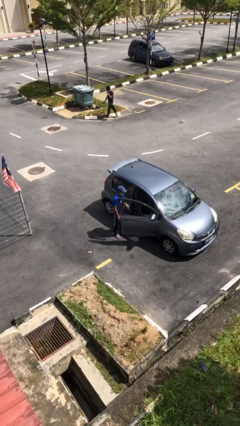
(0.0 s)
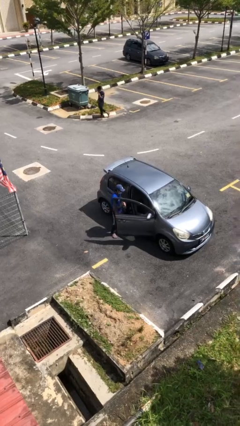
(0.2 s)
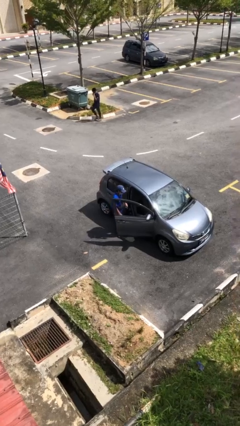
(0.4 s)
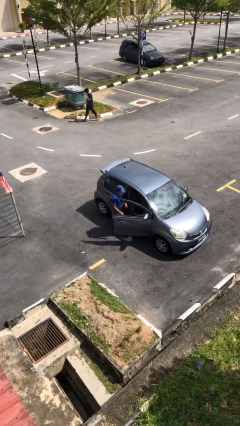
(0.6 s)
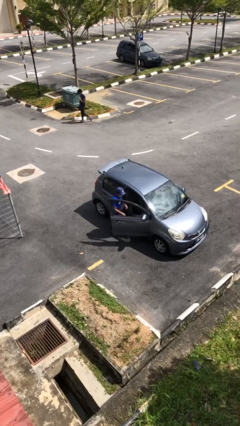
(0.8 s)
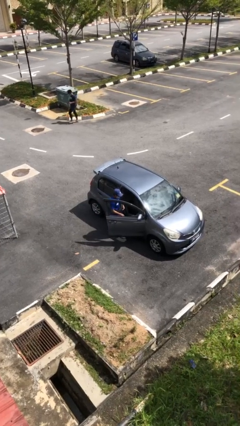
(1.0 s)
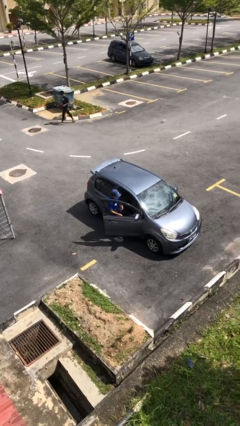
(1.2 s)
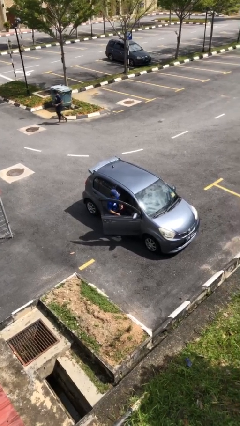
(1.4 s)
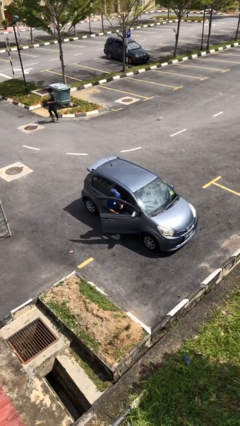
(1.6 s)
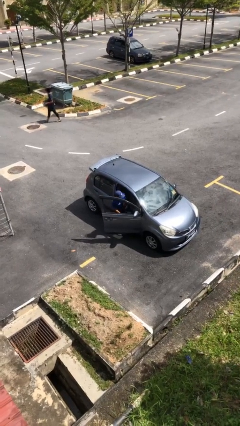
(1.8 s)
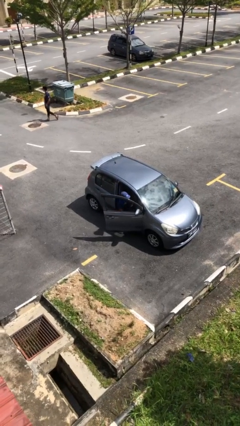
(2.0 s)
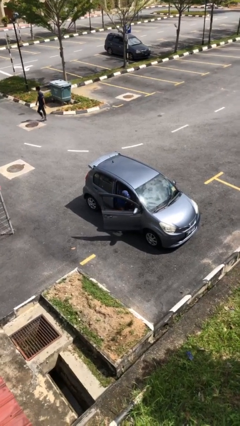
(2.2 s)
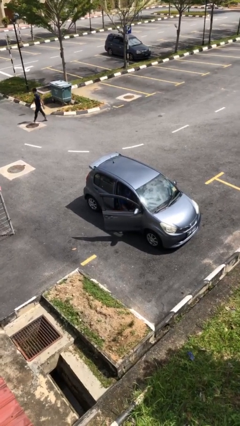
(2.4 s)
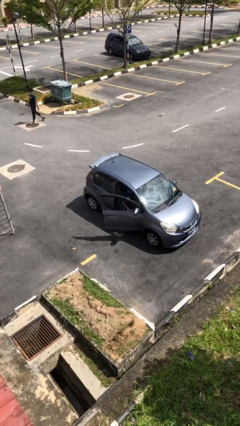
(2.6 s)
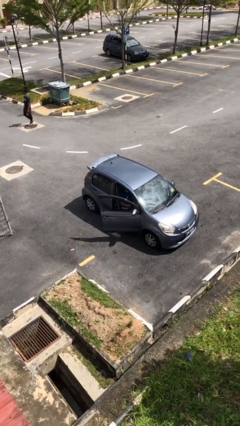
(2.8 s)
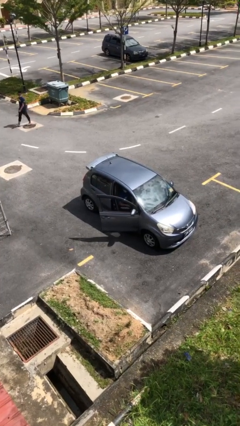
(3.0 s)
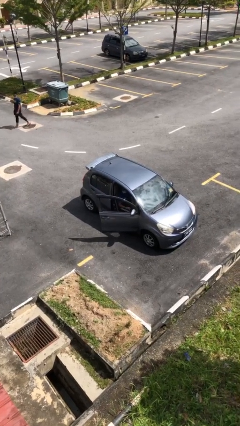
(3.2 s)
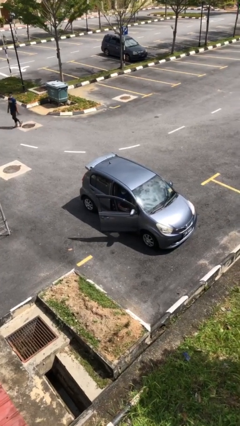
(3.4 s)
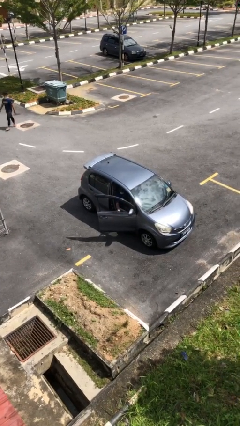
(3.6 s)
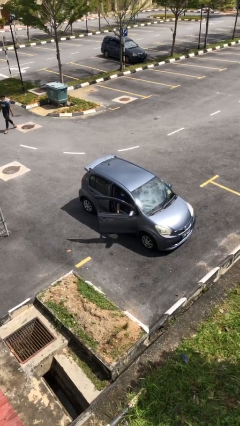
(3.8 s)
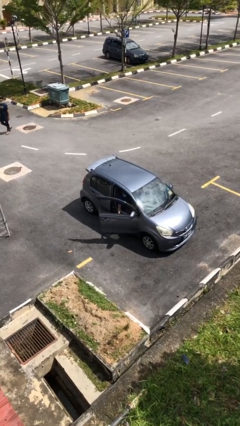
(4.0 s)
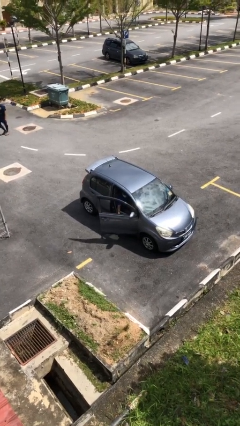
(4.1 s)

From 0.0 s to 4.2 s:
person enters car

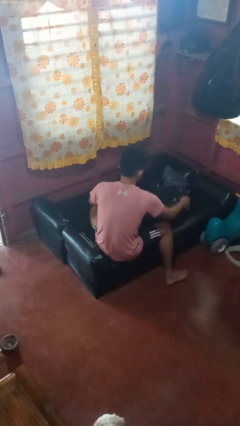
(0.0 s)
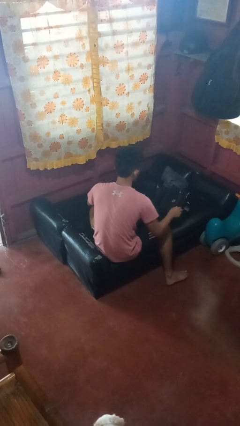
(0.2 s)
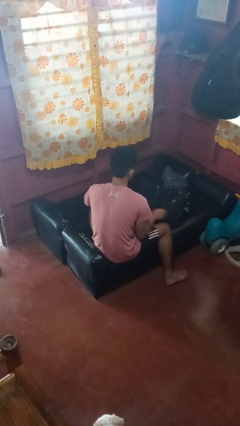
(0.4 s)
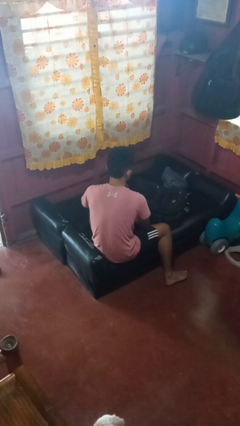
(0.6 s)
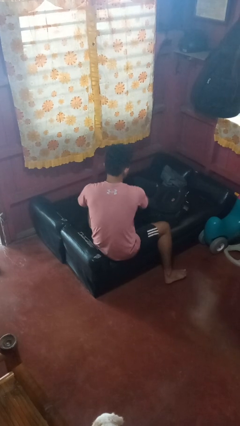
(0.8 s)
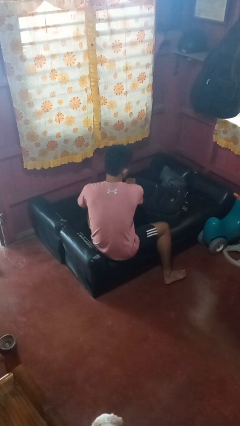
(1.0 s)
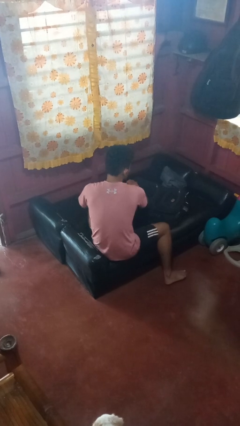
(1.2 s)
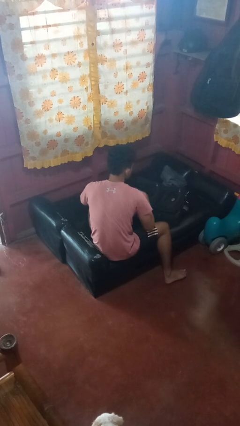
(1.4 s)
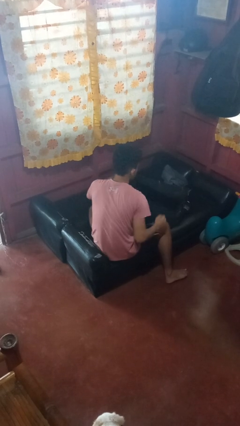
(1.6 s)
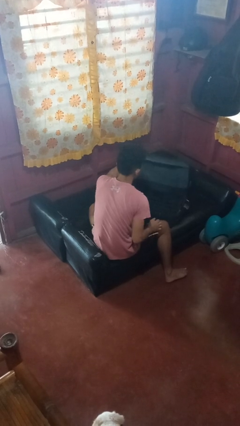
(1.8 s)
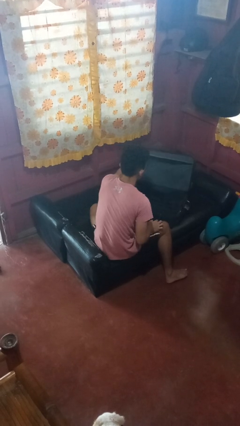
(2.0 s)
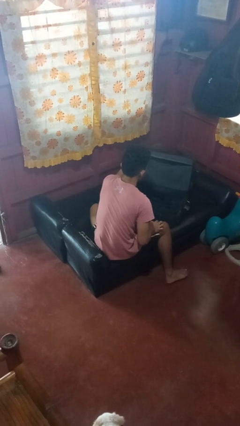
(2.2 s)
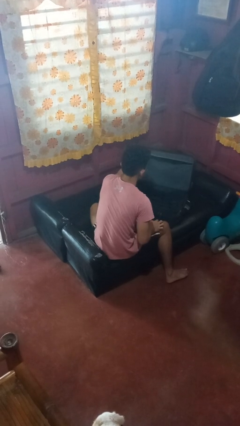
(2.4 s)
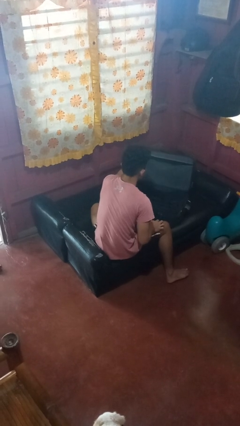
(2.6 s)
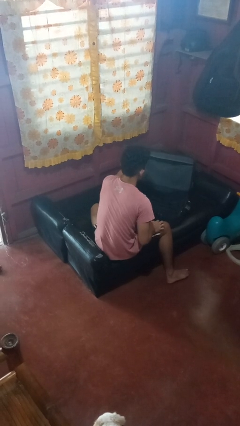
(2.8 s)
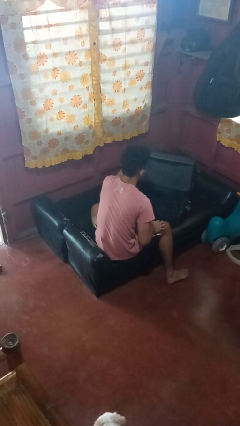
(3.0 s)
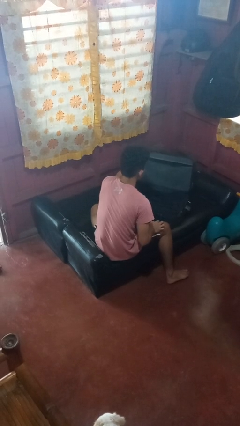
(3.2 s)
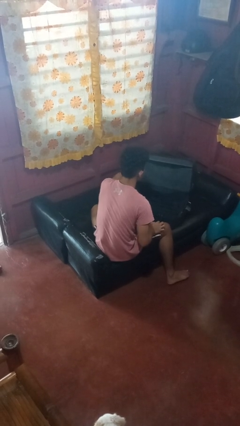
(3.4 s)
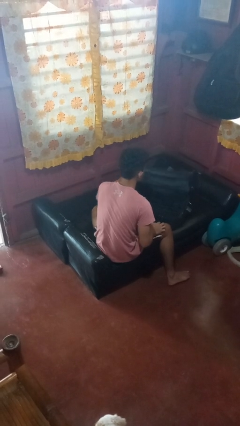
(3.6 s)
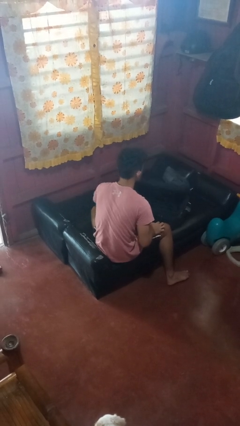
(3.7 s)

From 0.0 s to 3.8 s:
person opens suitcase

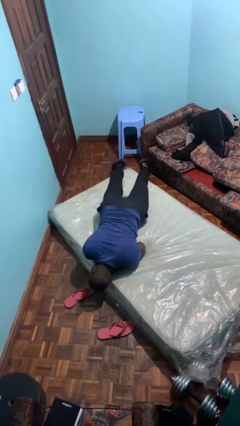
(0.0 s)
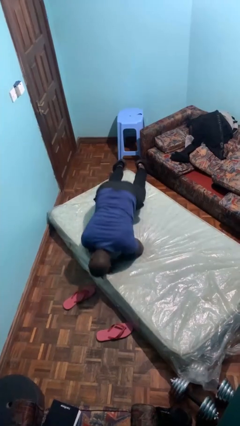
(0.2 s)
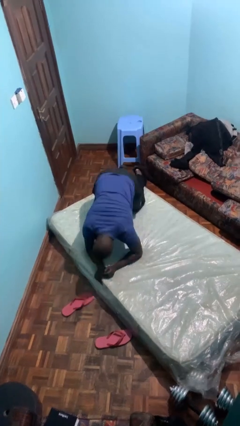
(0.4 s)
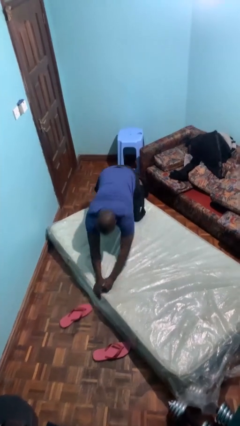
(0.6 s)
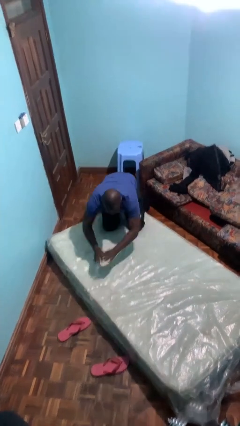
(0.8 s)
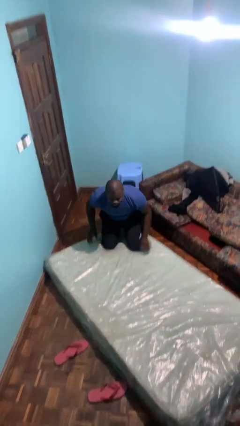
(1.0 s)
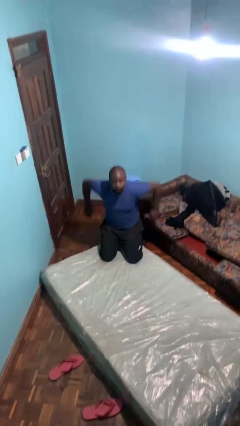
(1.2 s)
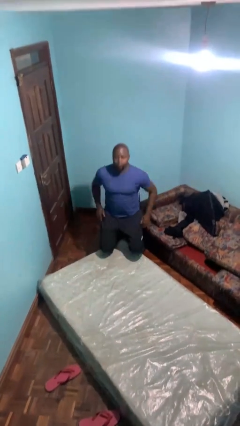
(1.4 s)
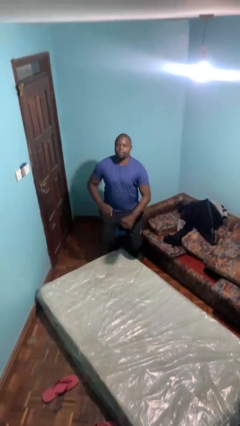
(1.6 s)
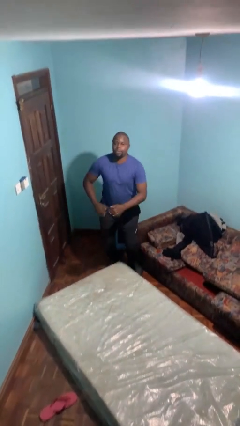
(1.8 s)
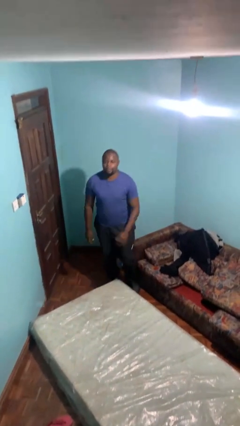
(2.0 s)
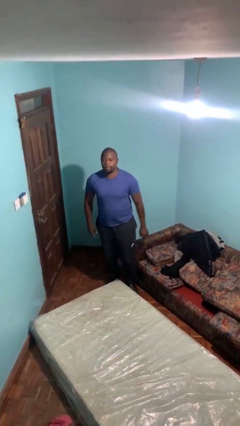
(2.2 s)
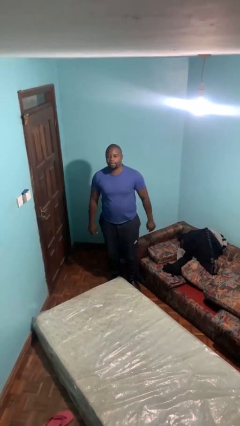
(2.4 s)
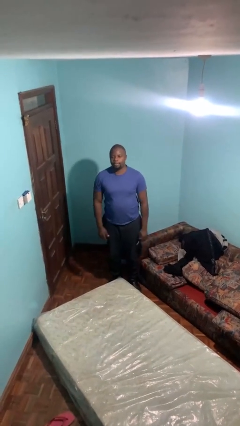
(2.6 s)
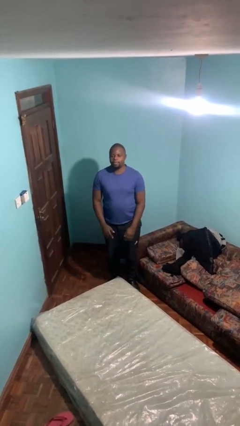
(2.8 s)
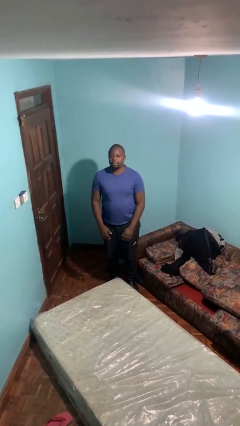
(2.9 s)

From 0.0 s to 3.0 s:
person stands up

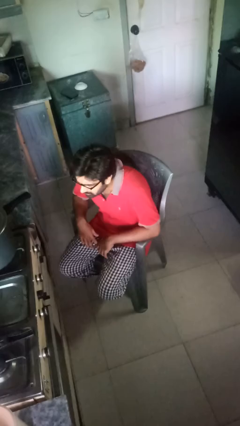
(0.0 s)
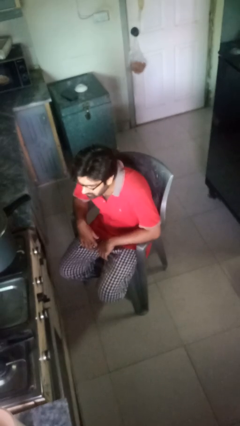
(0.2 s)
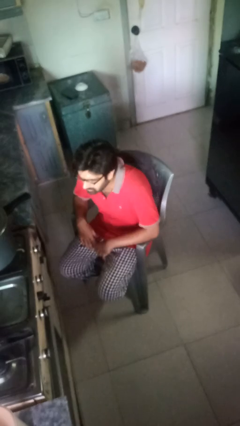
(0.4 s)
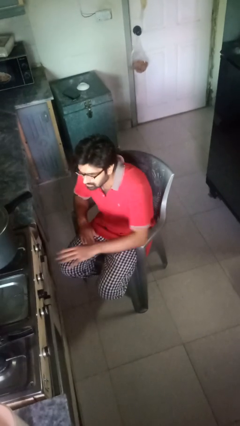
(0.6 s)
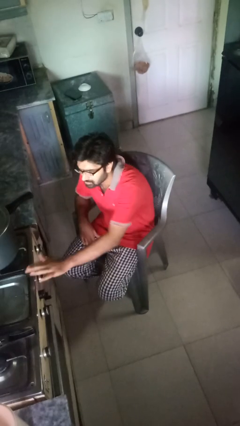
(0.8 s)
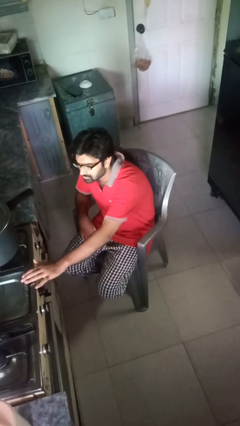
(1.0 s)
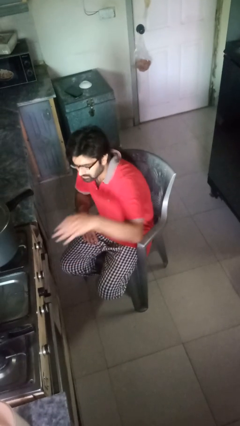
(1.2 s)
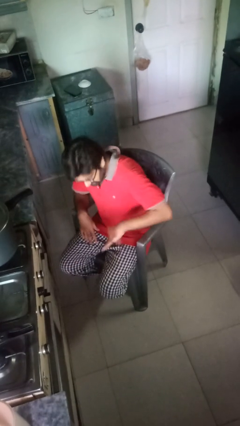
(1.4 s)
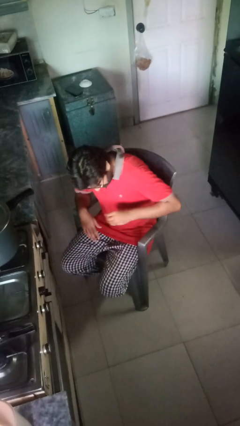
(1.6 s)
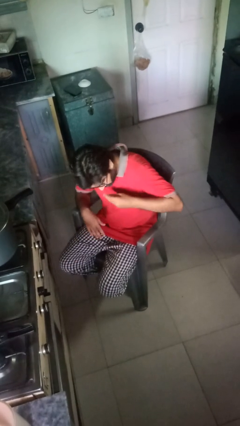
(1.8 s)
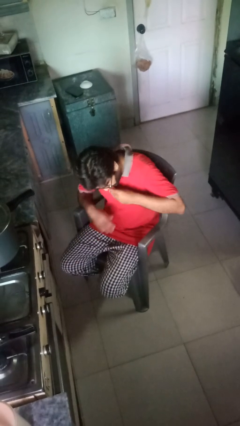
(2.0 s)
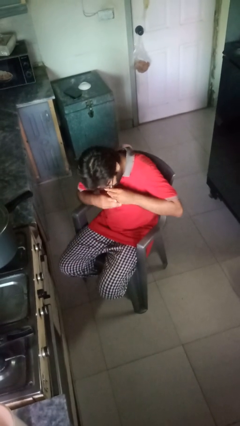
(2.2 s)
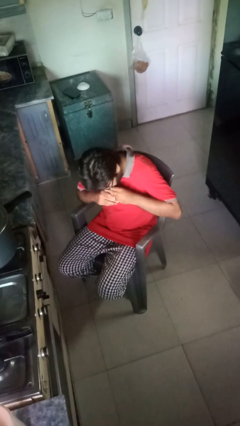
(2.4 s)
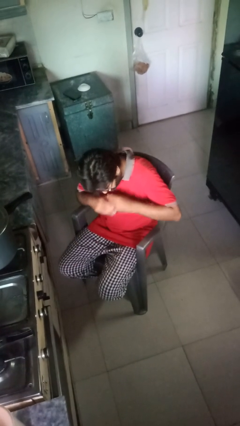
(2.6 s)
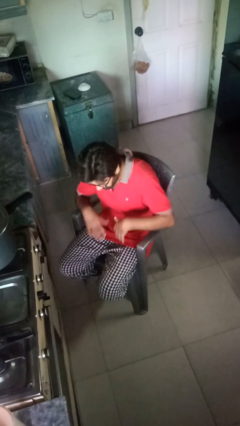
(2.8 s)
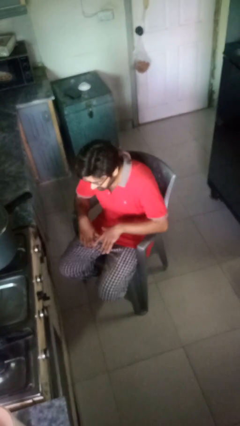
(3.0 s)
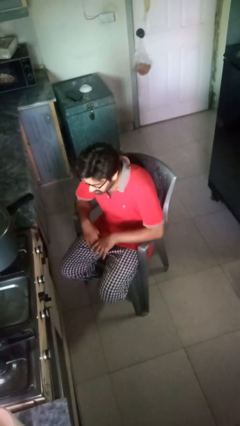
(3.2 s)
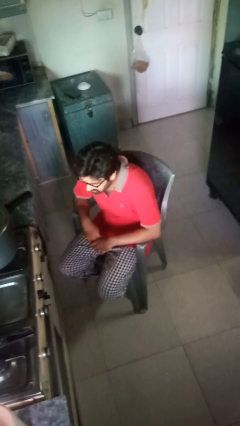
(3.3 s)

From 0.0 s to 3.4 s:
person burns hand

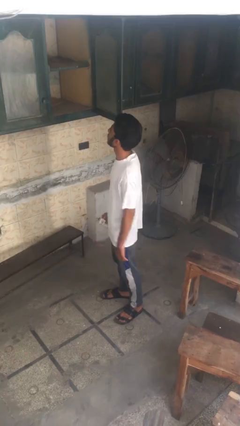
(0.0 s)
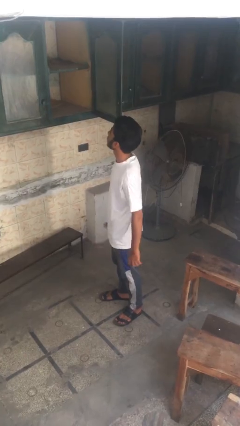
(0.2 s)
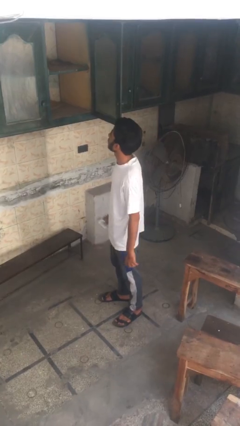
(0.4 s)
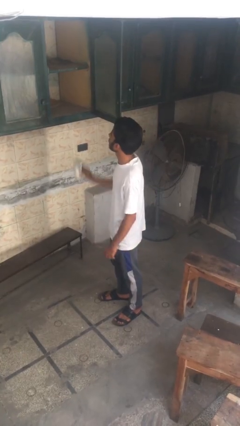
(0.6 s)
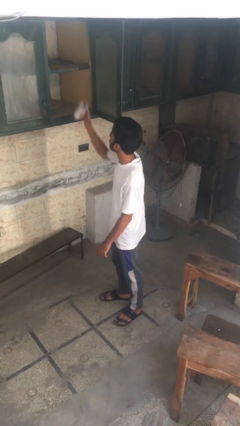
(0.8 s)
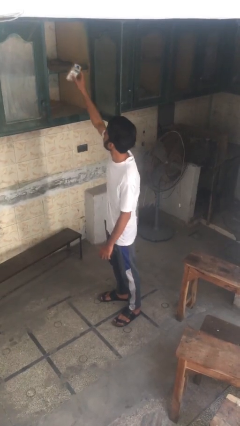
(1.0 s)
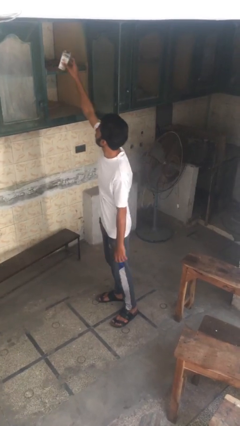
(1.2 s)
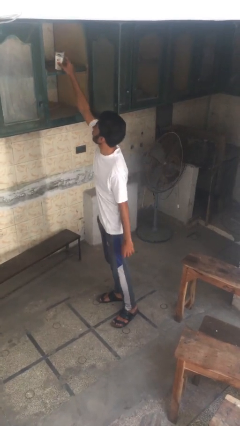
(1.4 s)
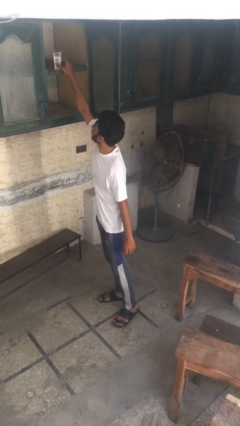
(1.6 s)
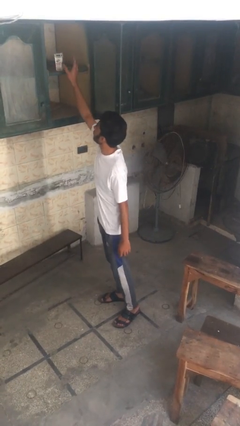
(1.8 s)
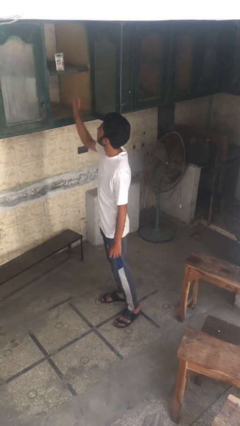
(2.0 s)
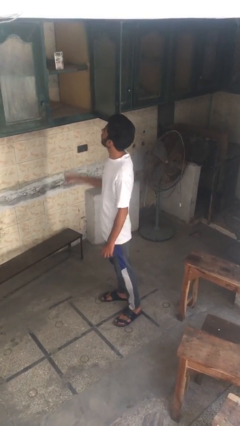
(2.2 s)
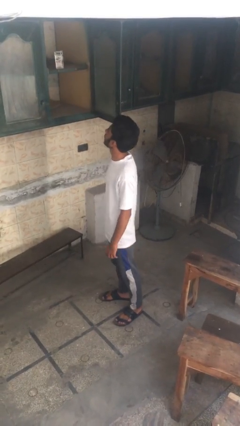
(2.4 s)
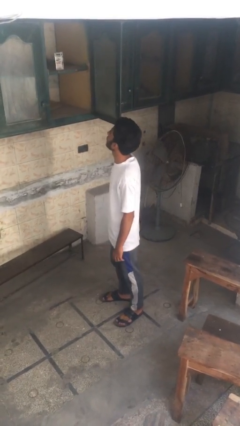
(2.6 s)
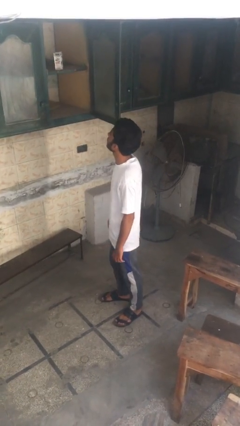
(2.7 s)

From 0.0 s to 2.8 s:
person puts object in cabinet
